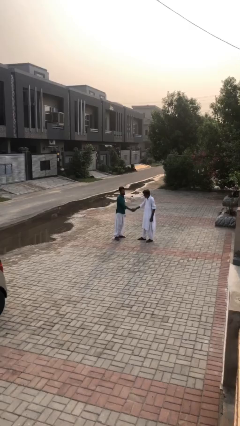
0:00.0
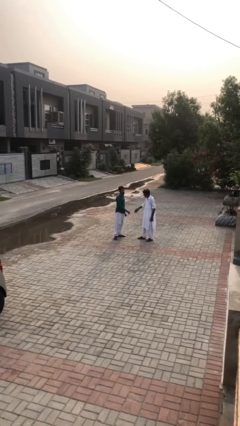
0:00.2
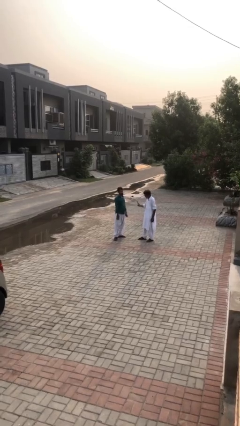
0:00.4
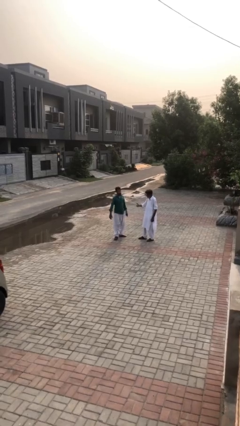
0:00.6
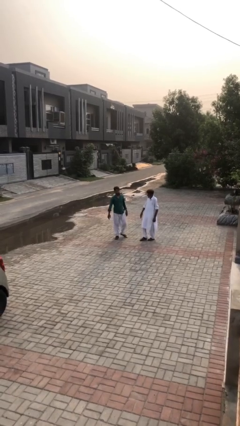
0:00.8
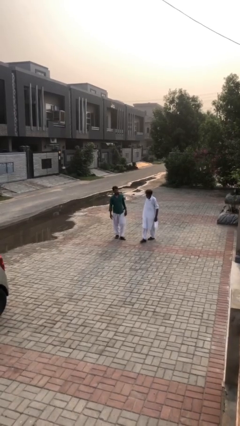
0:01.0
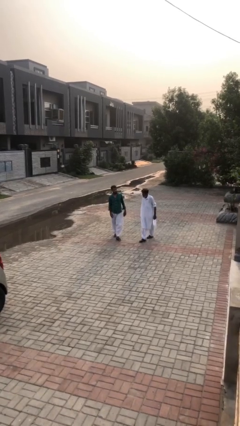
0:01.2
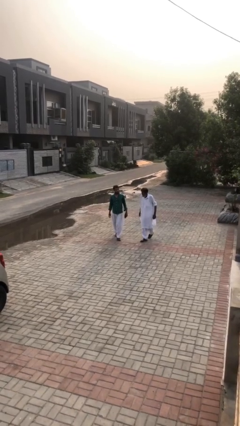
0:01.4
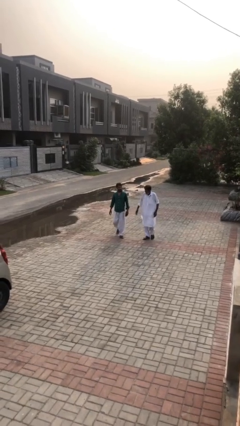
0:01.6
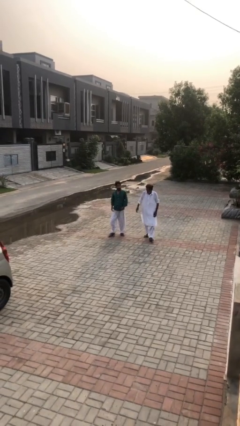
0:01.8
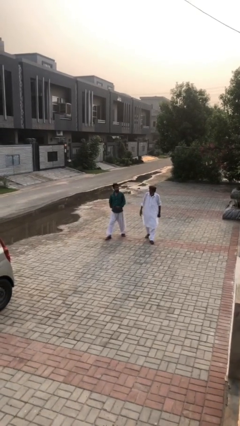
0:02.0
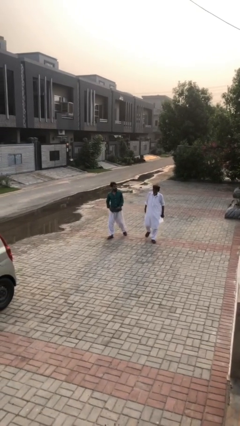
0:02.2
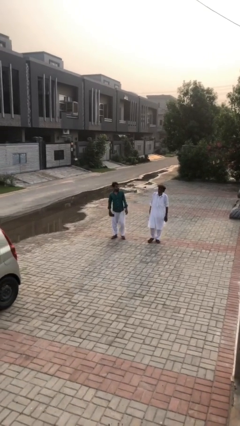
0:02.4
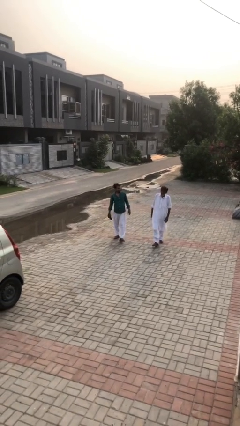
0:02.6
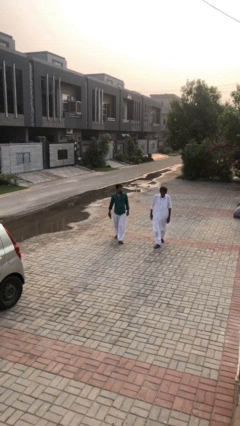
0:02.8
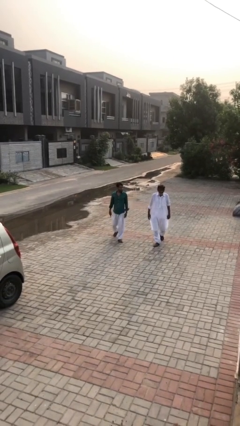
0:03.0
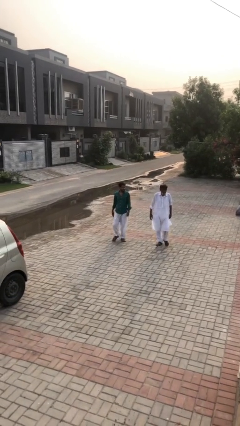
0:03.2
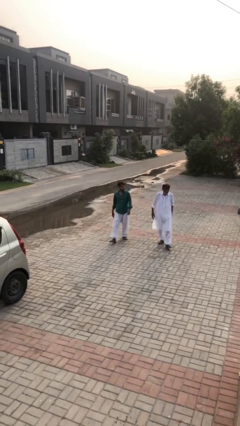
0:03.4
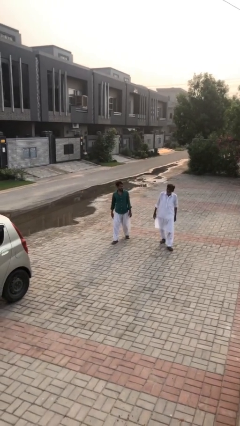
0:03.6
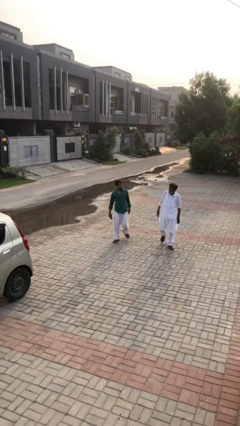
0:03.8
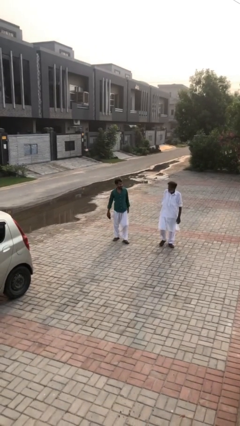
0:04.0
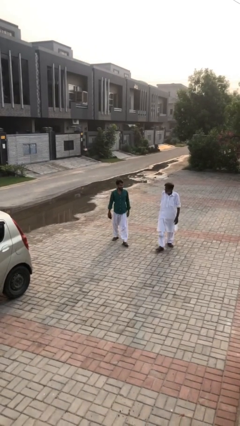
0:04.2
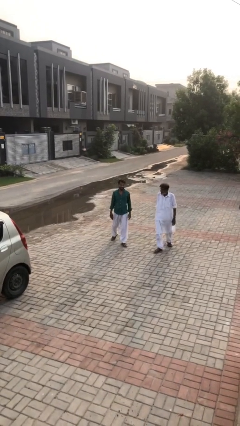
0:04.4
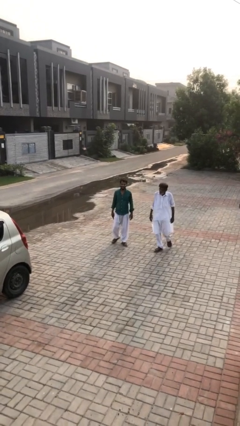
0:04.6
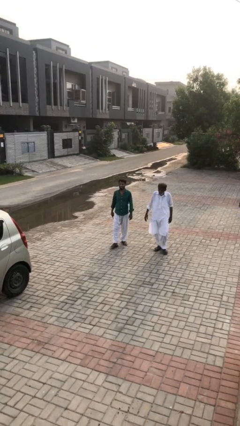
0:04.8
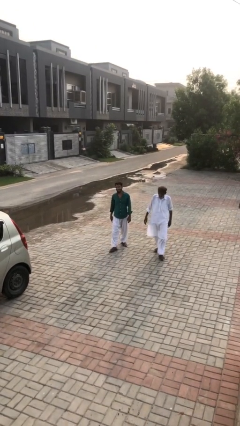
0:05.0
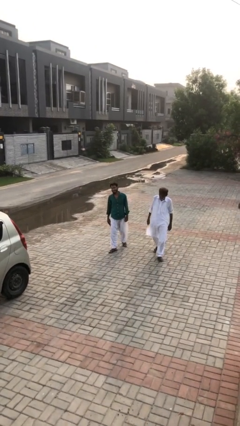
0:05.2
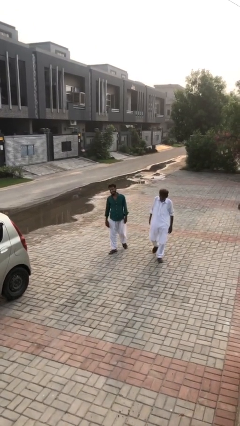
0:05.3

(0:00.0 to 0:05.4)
person talks to person

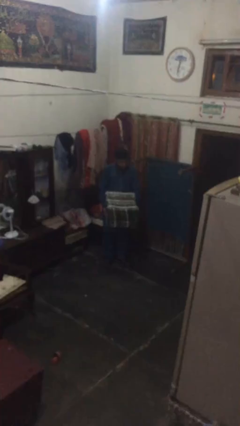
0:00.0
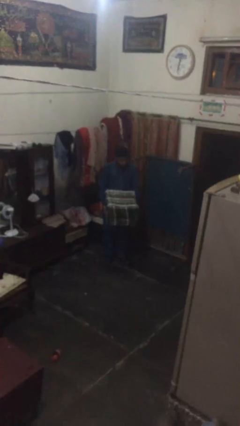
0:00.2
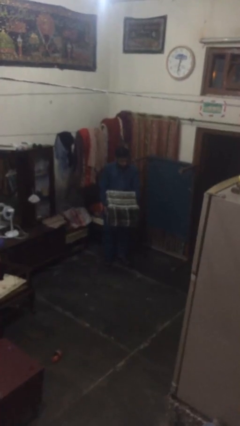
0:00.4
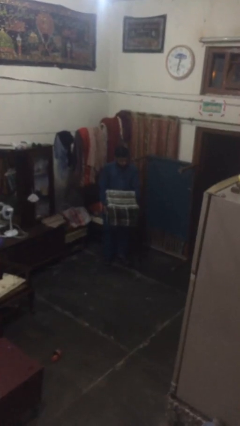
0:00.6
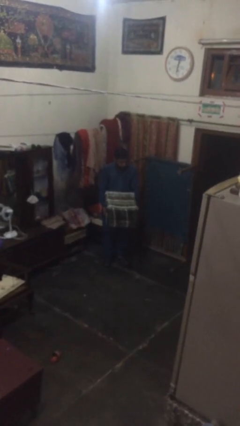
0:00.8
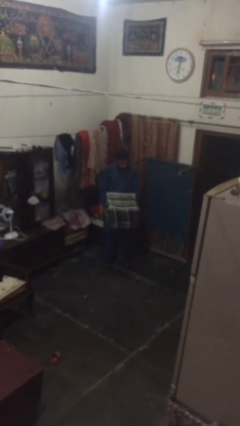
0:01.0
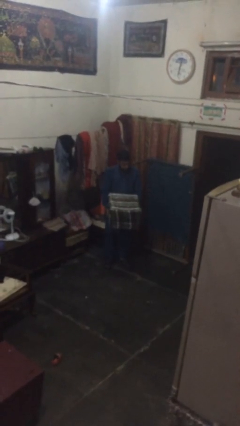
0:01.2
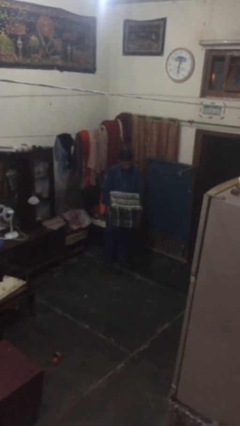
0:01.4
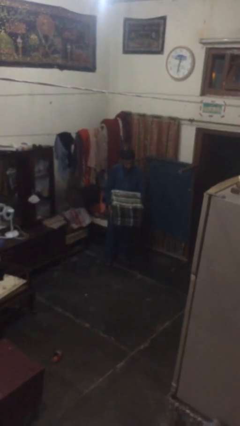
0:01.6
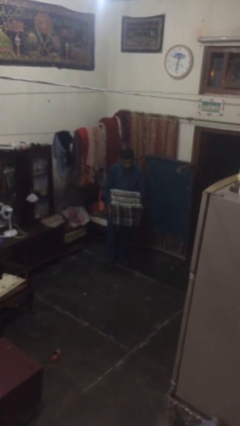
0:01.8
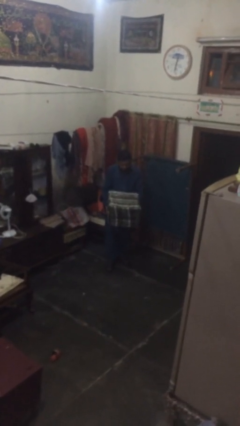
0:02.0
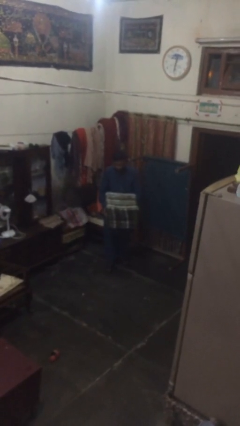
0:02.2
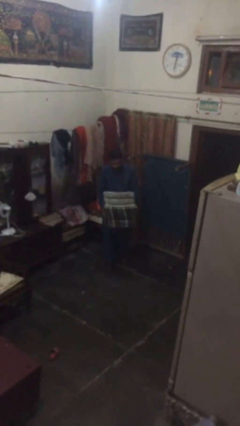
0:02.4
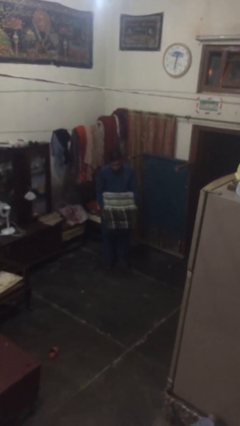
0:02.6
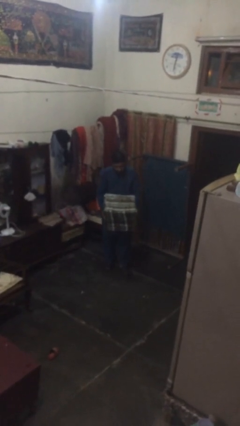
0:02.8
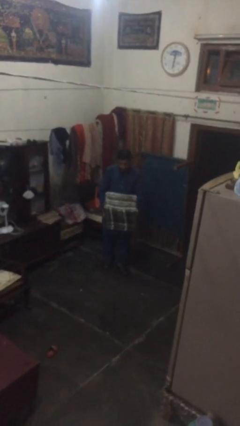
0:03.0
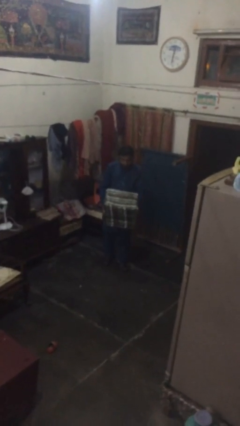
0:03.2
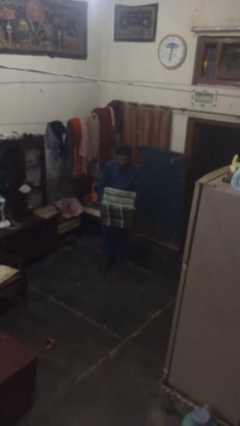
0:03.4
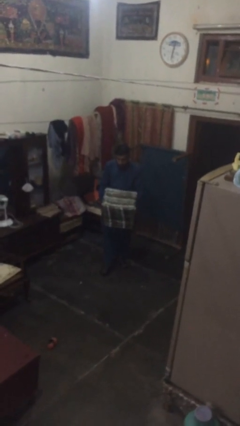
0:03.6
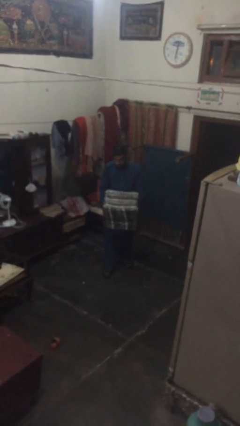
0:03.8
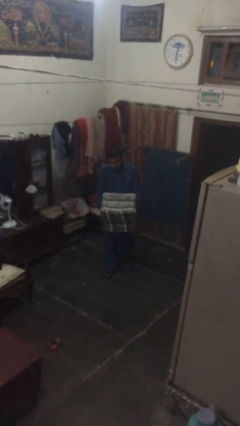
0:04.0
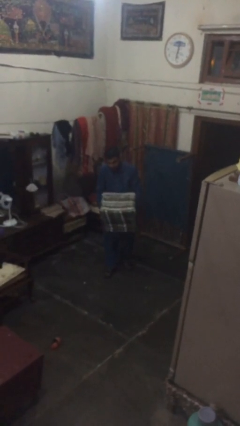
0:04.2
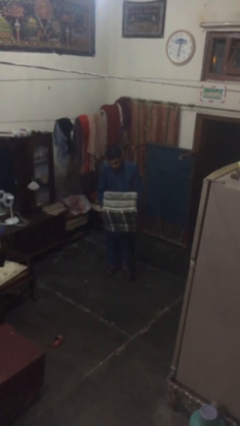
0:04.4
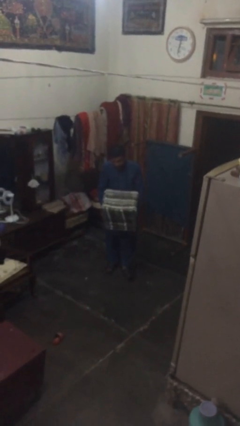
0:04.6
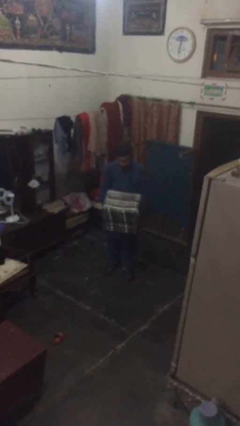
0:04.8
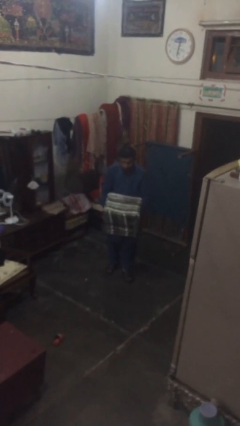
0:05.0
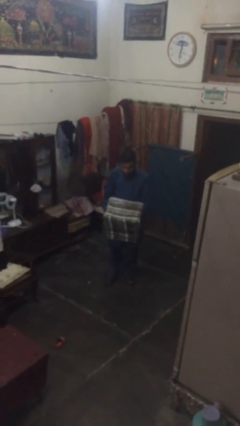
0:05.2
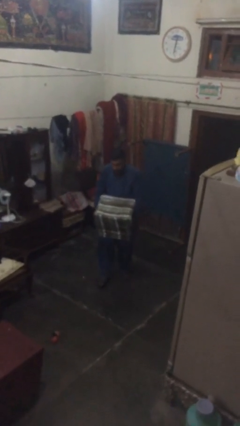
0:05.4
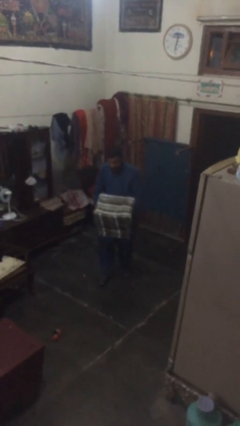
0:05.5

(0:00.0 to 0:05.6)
person carries heavy object

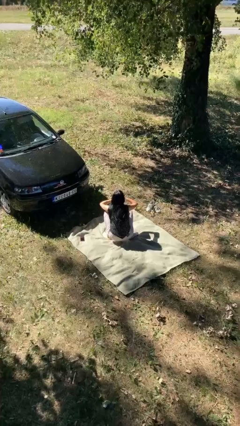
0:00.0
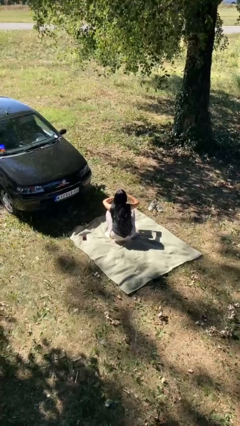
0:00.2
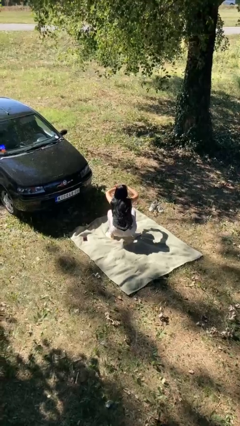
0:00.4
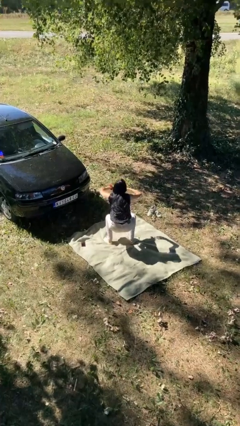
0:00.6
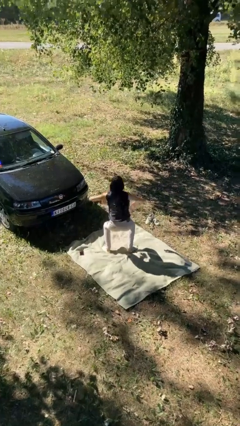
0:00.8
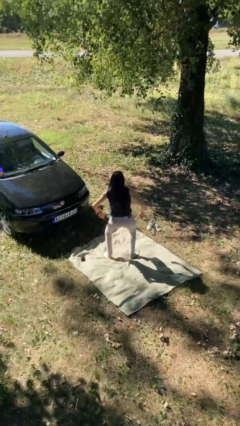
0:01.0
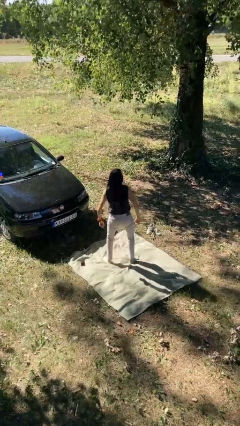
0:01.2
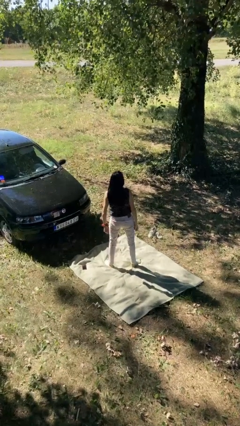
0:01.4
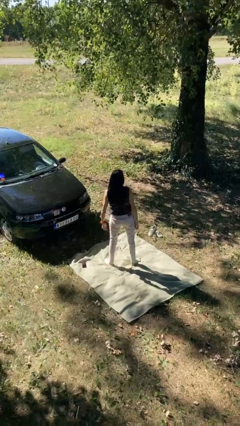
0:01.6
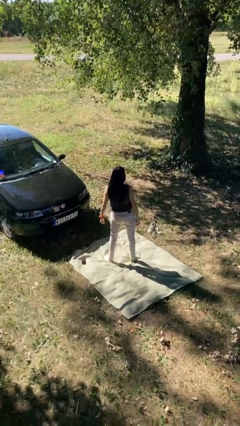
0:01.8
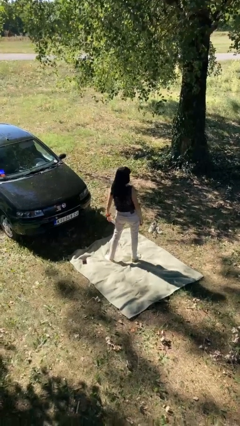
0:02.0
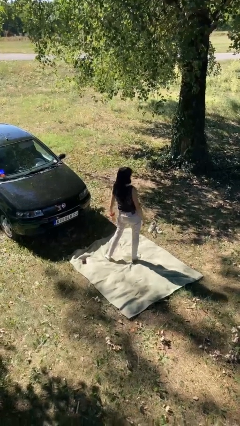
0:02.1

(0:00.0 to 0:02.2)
person stands up

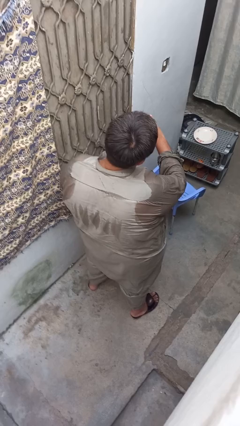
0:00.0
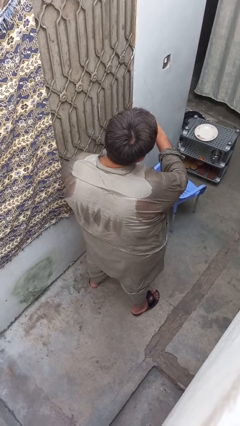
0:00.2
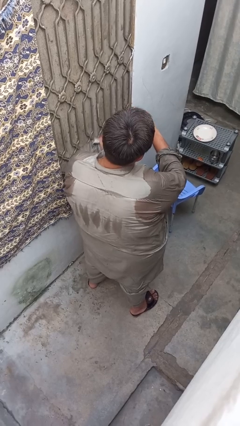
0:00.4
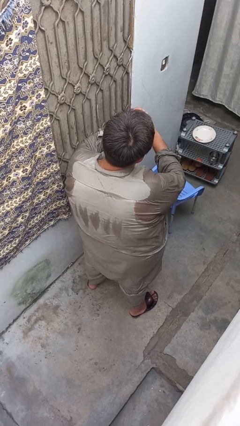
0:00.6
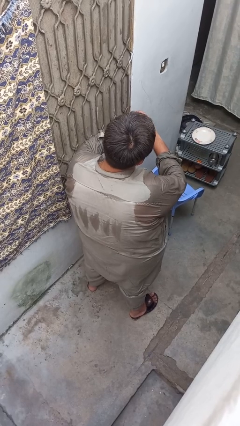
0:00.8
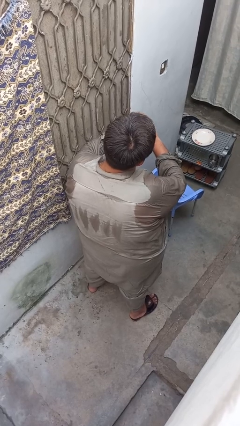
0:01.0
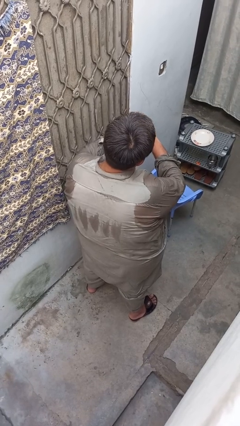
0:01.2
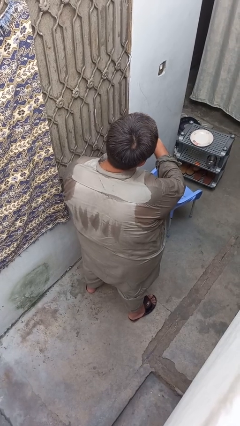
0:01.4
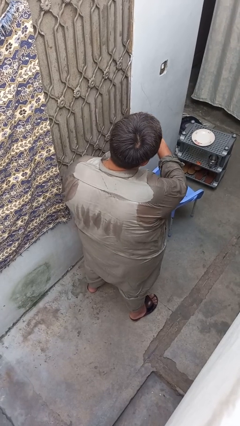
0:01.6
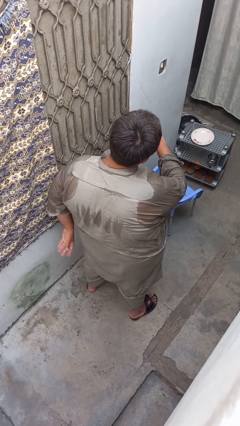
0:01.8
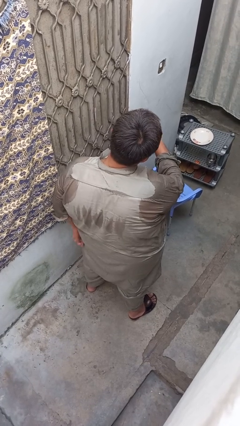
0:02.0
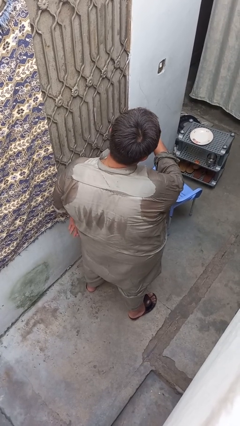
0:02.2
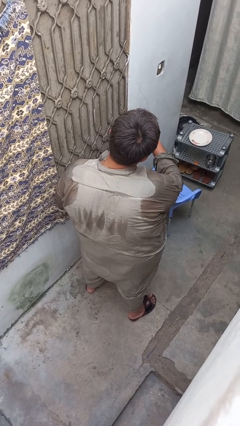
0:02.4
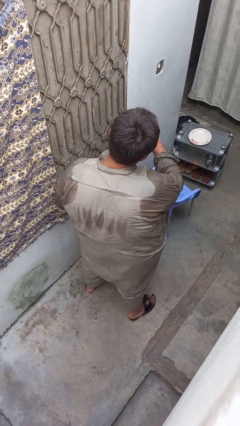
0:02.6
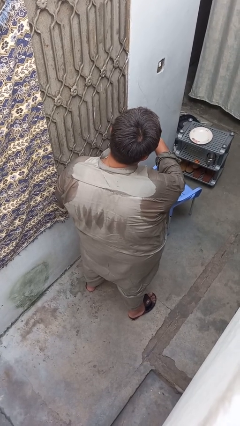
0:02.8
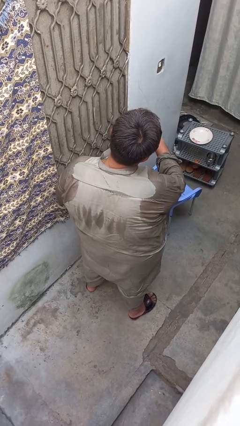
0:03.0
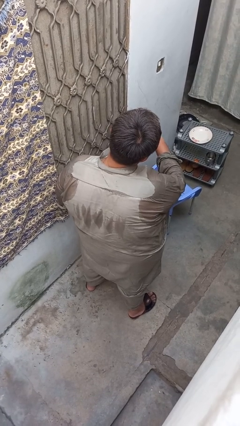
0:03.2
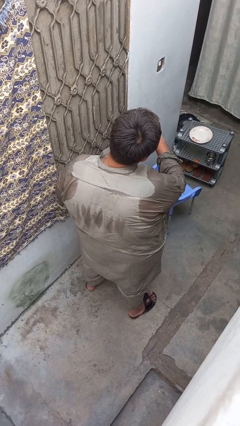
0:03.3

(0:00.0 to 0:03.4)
person puts on ring

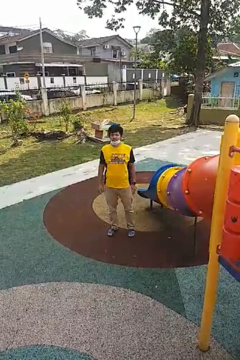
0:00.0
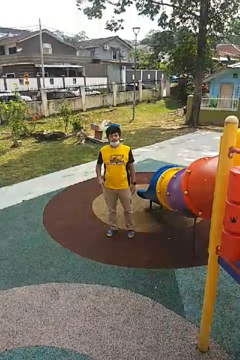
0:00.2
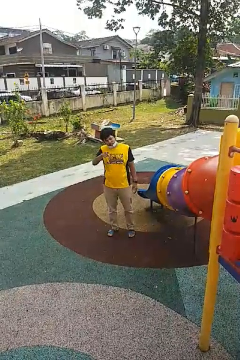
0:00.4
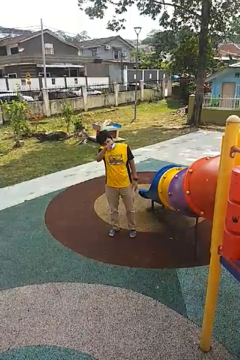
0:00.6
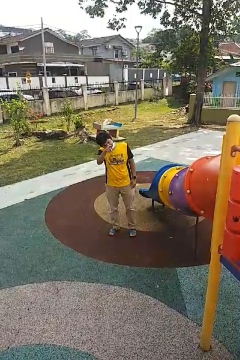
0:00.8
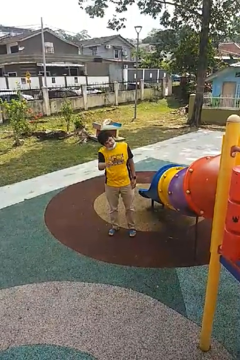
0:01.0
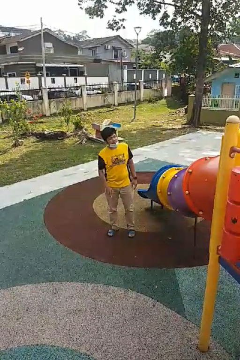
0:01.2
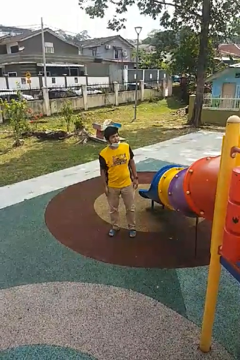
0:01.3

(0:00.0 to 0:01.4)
person points at person
